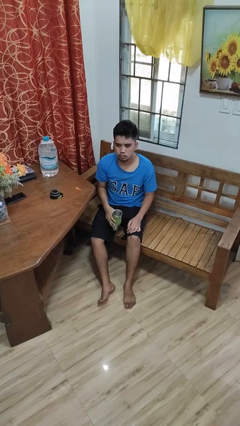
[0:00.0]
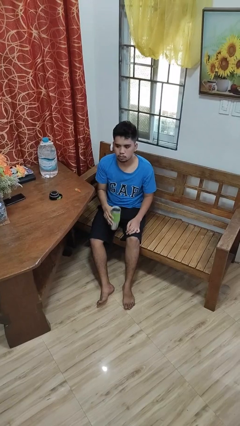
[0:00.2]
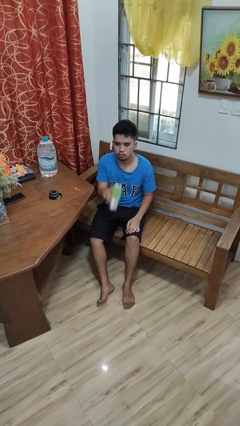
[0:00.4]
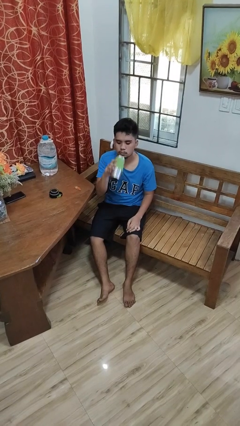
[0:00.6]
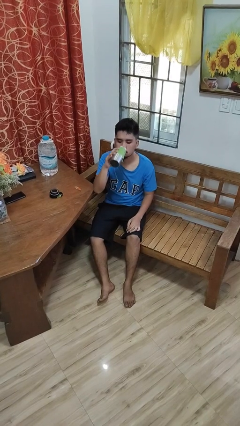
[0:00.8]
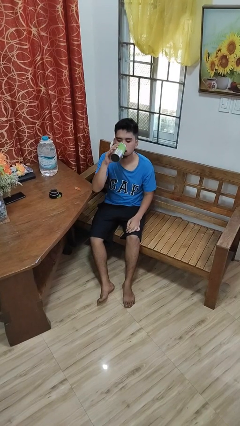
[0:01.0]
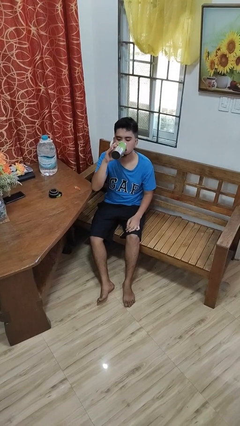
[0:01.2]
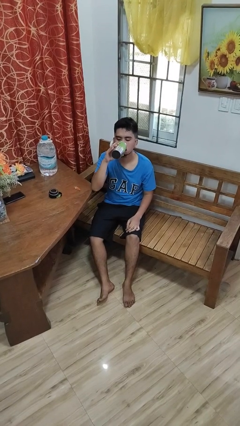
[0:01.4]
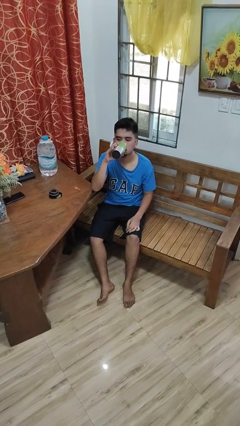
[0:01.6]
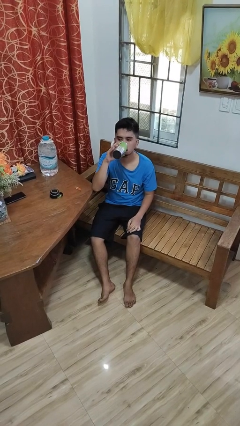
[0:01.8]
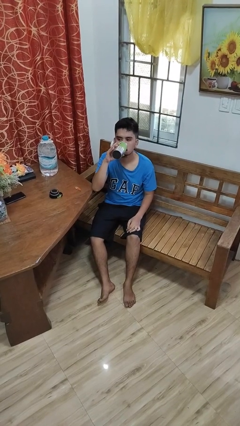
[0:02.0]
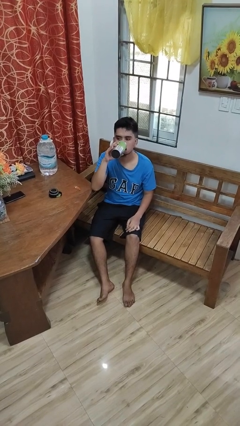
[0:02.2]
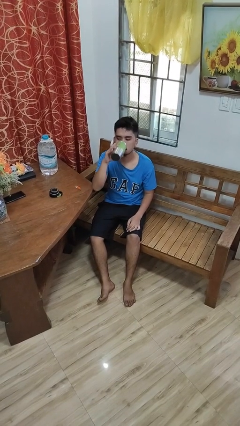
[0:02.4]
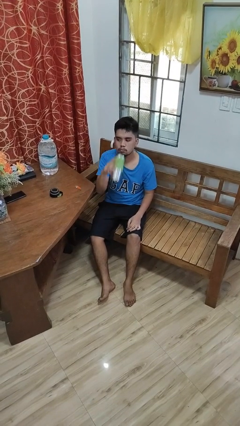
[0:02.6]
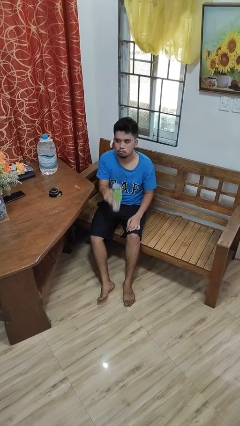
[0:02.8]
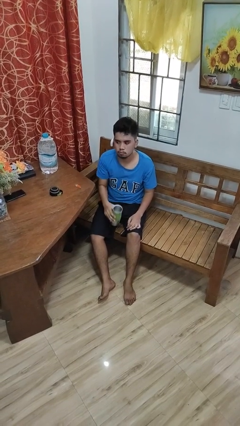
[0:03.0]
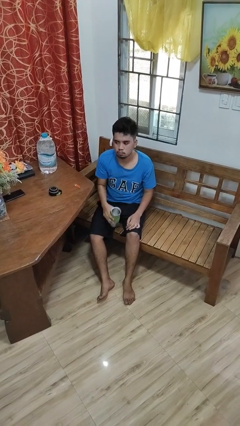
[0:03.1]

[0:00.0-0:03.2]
person drinks from bottle

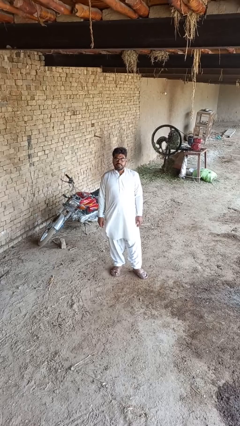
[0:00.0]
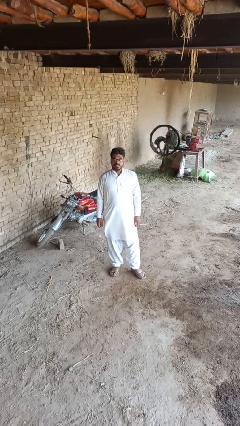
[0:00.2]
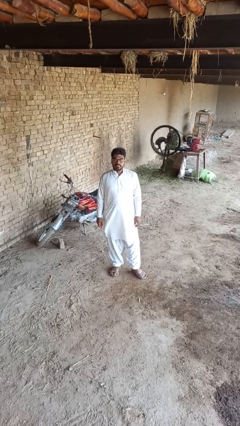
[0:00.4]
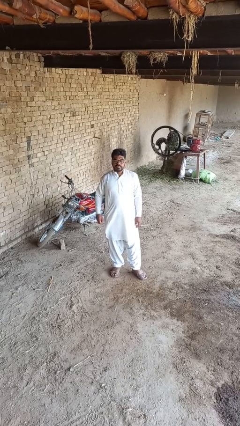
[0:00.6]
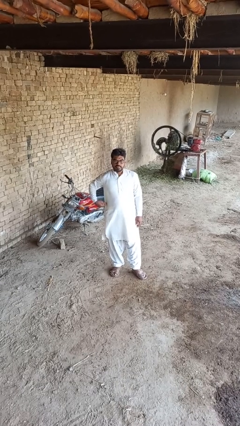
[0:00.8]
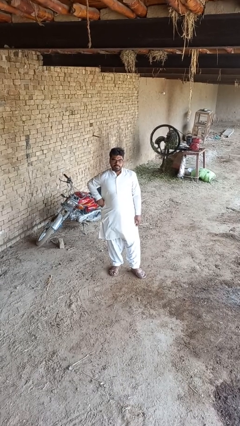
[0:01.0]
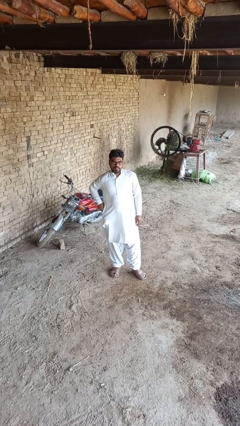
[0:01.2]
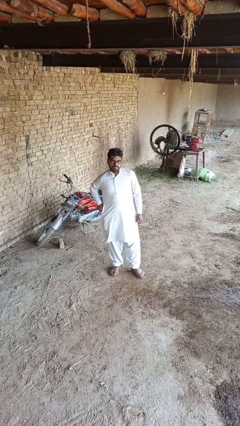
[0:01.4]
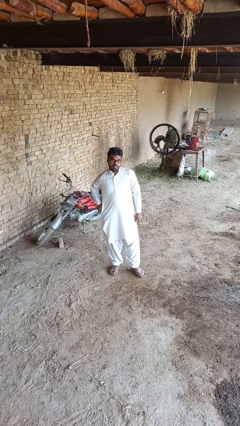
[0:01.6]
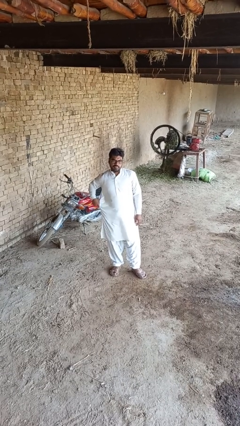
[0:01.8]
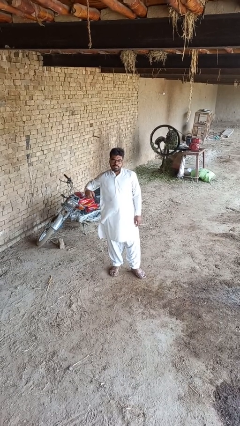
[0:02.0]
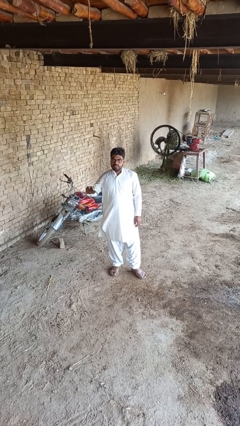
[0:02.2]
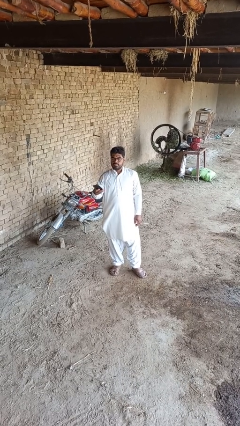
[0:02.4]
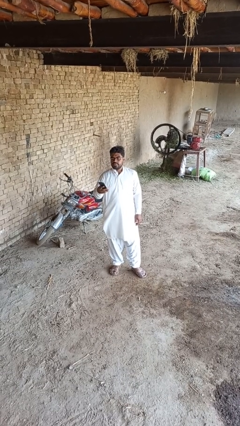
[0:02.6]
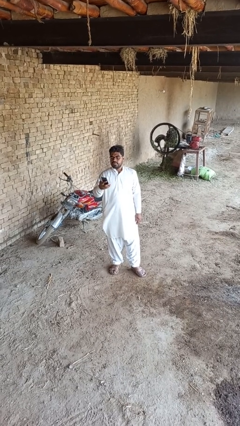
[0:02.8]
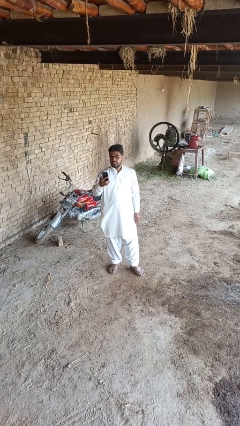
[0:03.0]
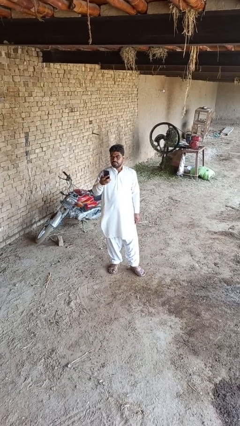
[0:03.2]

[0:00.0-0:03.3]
person takes phone from pocket

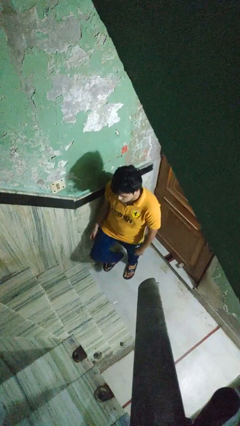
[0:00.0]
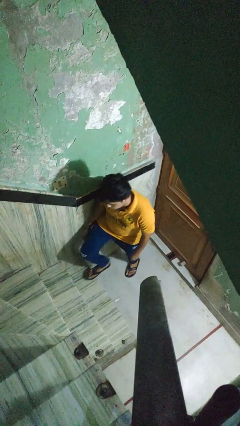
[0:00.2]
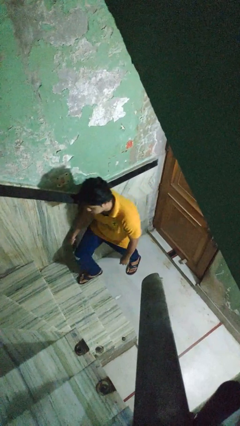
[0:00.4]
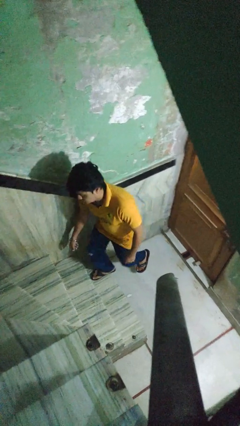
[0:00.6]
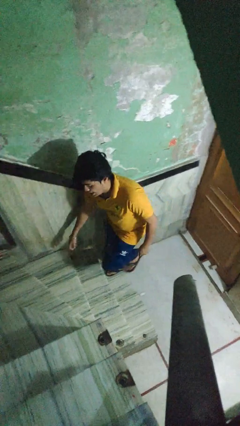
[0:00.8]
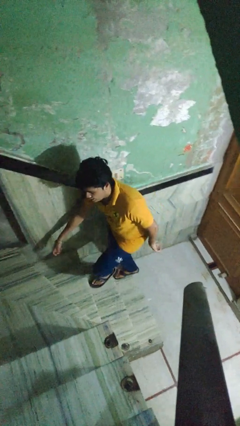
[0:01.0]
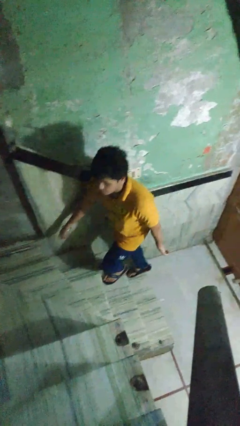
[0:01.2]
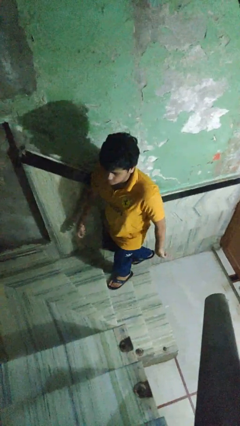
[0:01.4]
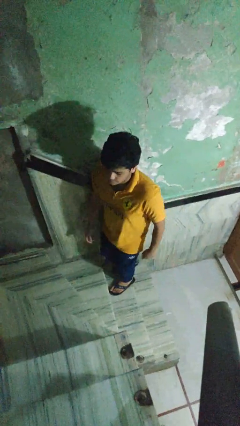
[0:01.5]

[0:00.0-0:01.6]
person climbs up stairs

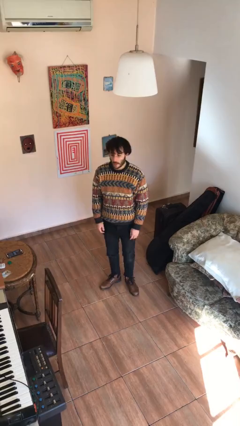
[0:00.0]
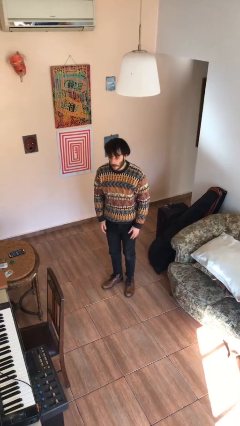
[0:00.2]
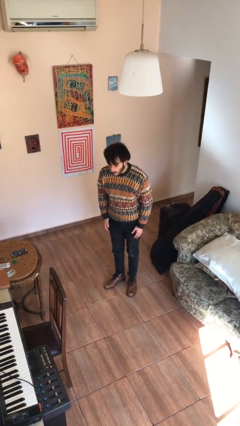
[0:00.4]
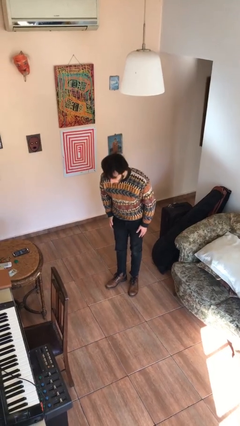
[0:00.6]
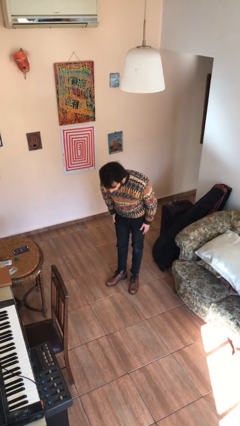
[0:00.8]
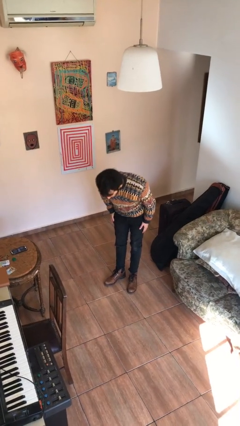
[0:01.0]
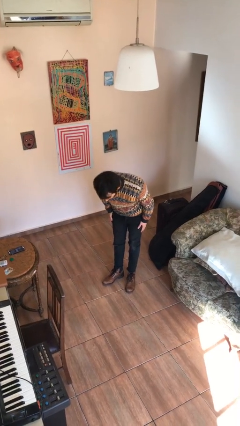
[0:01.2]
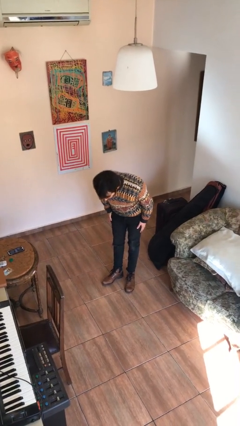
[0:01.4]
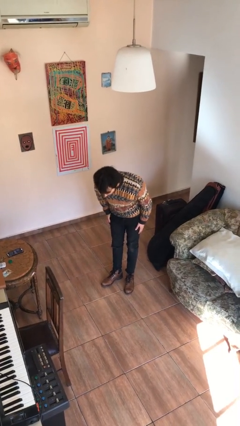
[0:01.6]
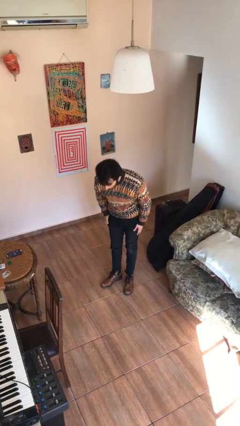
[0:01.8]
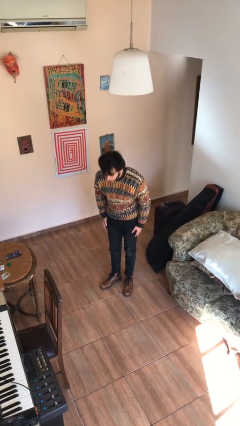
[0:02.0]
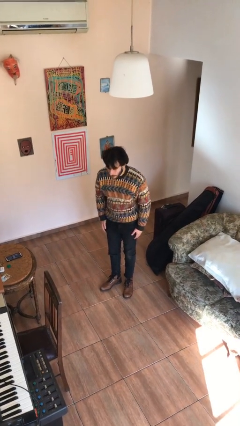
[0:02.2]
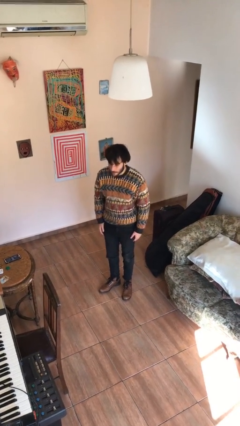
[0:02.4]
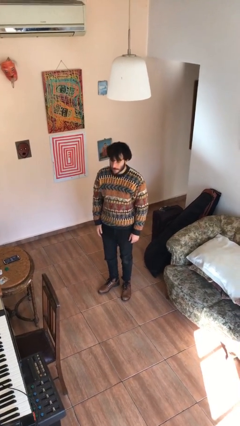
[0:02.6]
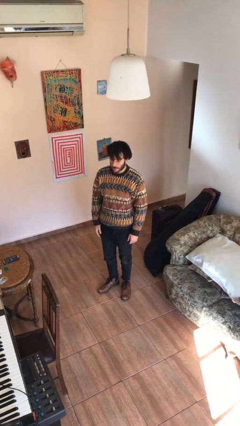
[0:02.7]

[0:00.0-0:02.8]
person bows

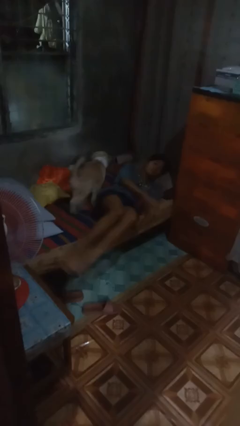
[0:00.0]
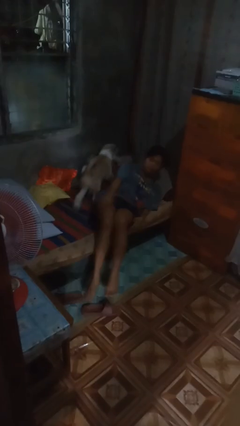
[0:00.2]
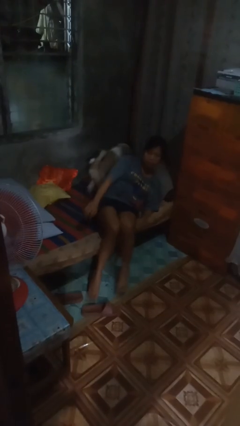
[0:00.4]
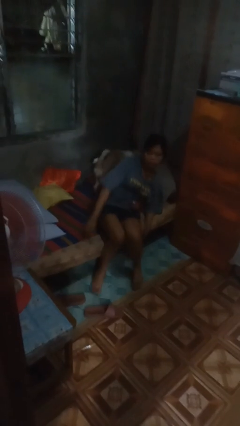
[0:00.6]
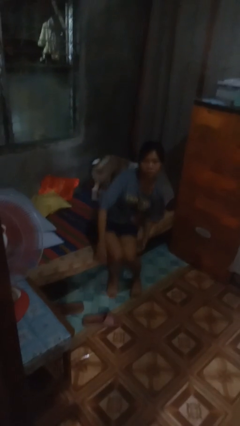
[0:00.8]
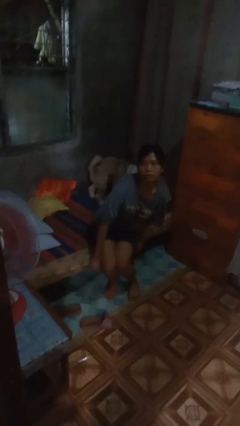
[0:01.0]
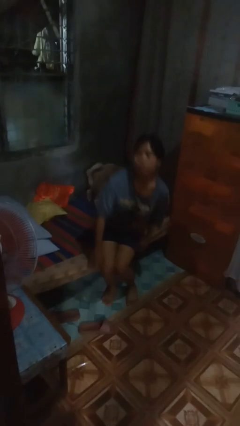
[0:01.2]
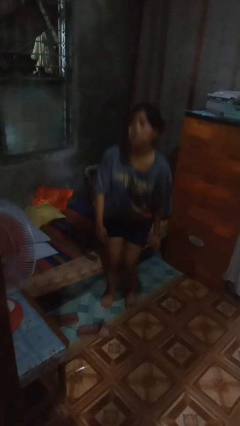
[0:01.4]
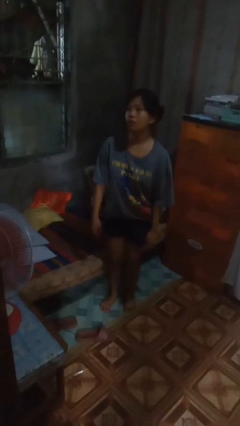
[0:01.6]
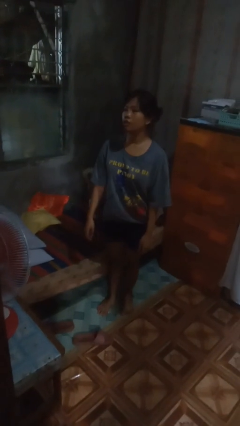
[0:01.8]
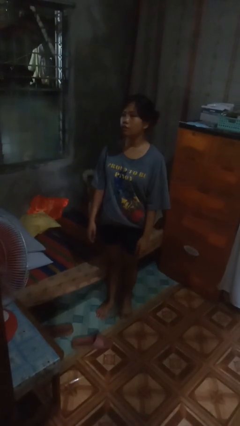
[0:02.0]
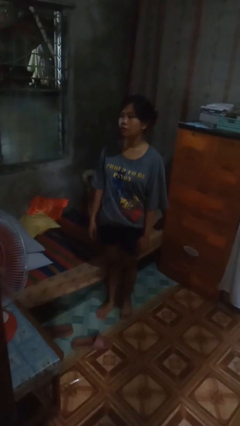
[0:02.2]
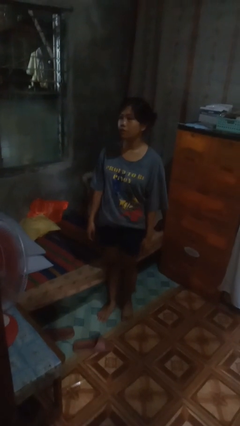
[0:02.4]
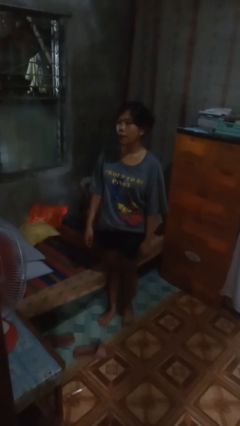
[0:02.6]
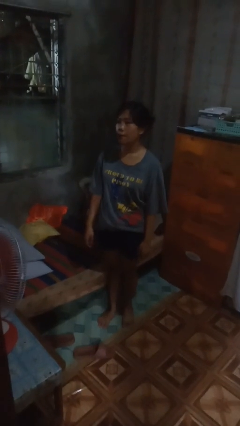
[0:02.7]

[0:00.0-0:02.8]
person stands up

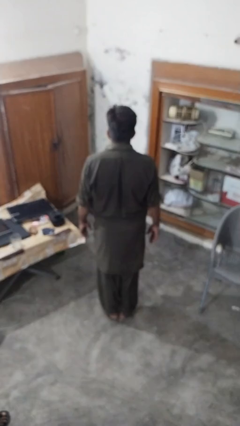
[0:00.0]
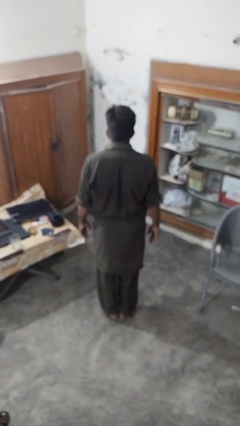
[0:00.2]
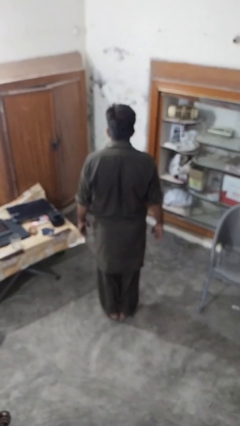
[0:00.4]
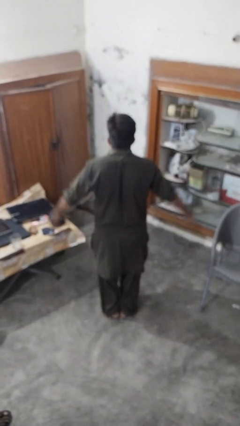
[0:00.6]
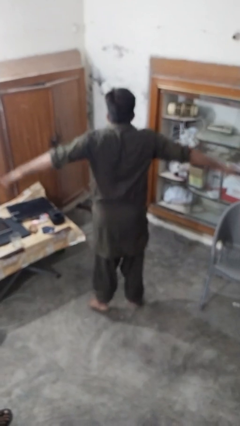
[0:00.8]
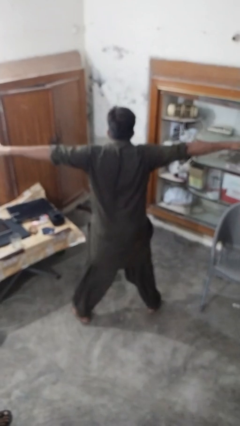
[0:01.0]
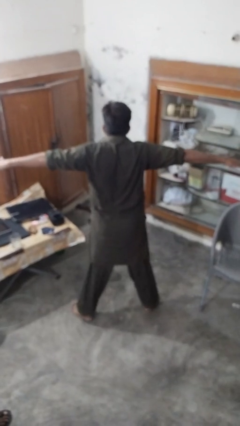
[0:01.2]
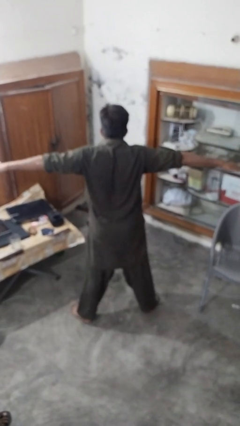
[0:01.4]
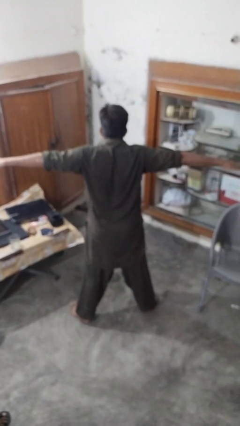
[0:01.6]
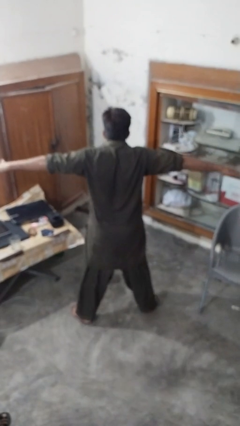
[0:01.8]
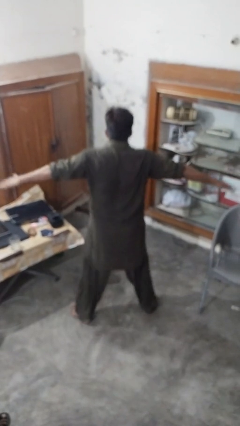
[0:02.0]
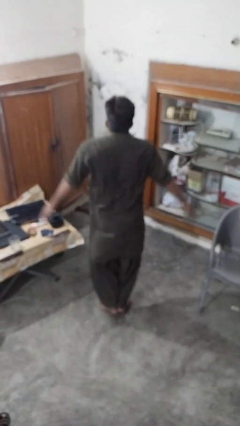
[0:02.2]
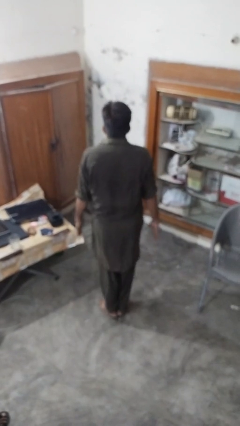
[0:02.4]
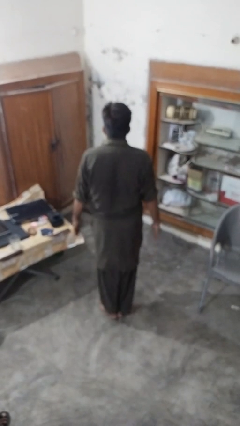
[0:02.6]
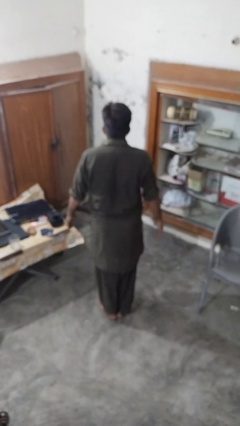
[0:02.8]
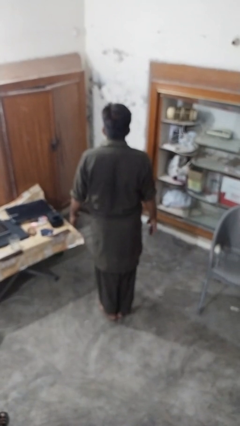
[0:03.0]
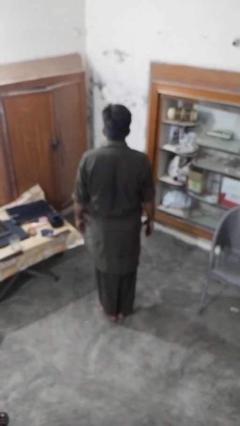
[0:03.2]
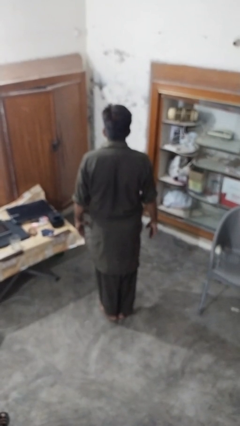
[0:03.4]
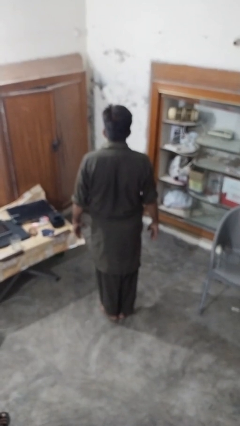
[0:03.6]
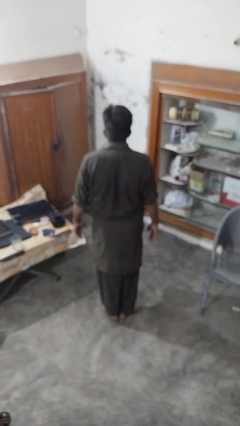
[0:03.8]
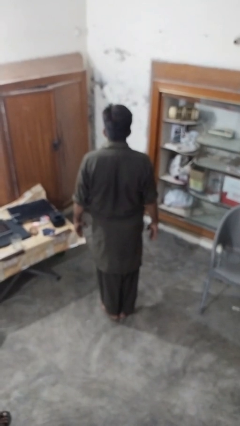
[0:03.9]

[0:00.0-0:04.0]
person exercises with jumping jacks
